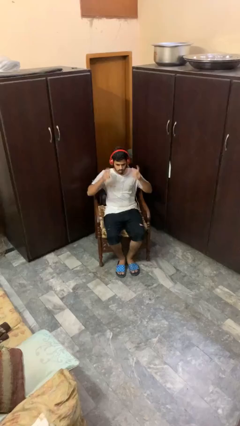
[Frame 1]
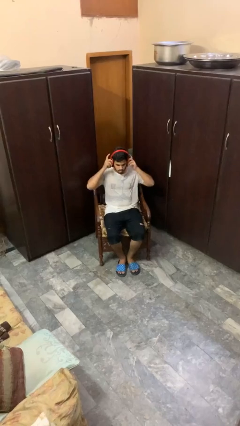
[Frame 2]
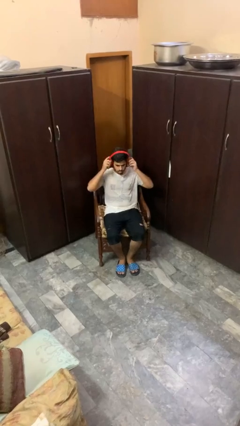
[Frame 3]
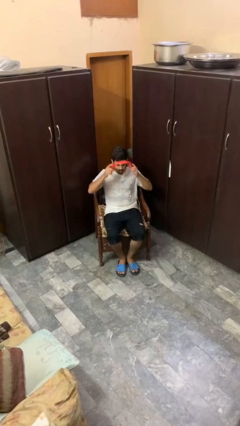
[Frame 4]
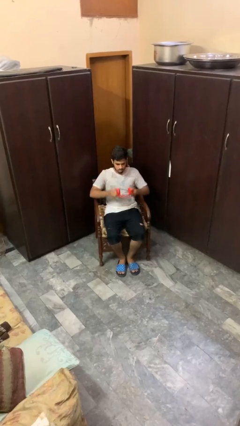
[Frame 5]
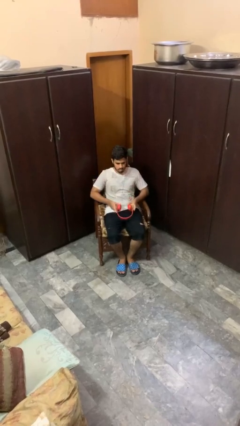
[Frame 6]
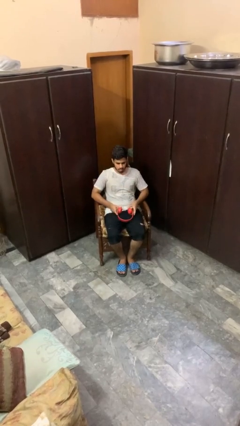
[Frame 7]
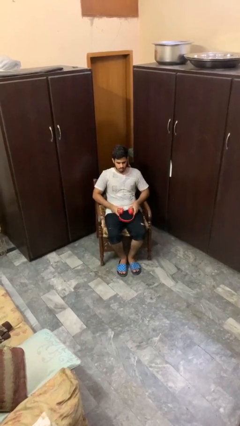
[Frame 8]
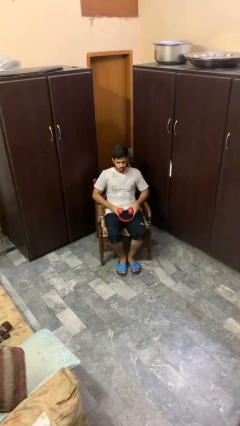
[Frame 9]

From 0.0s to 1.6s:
person takes off headphones

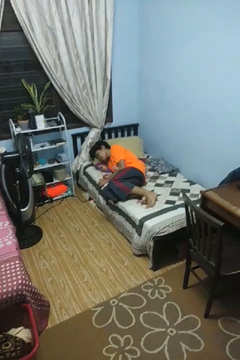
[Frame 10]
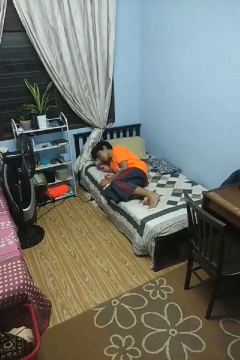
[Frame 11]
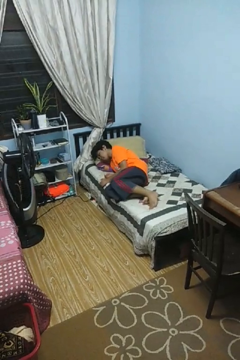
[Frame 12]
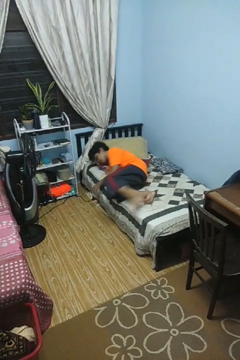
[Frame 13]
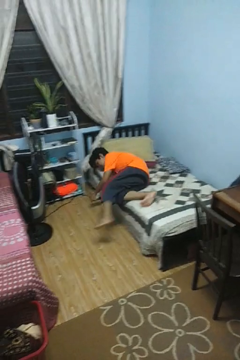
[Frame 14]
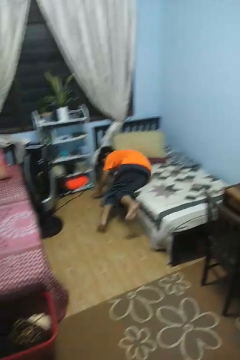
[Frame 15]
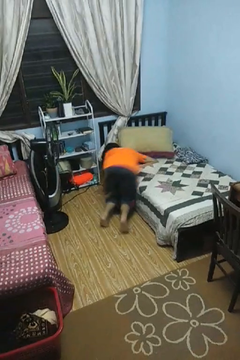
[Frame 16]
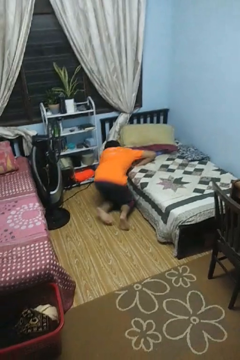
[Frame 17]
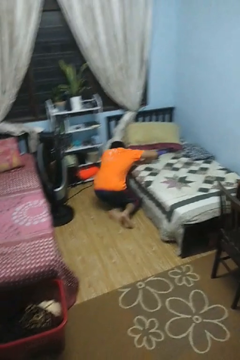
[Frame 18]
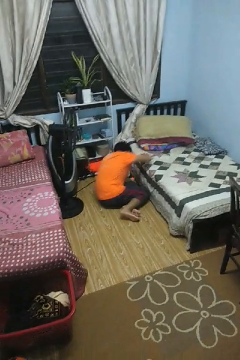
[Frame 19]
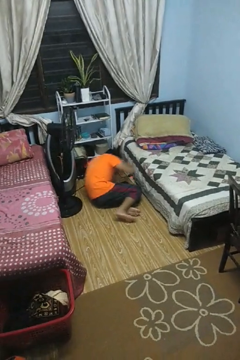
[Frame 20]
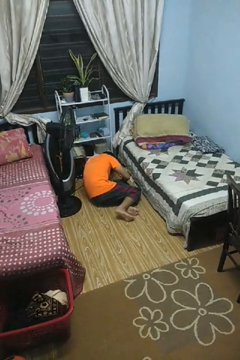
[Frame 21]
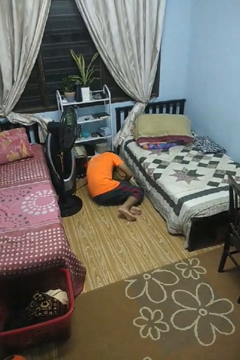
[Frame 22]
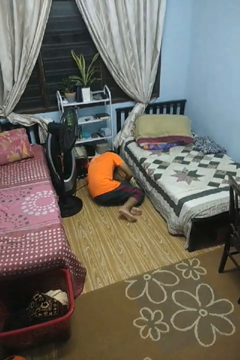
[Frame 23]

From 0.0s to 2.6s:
person falls from bed

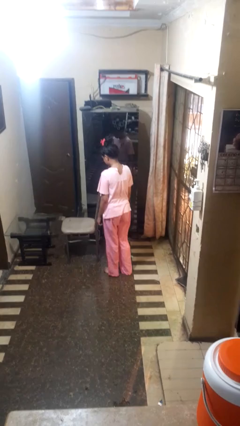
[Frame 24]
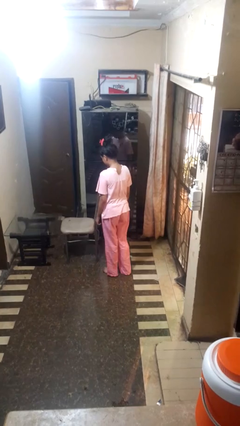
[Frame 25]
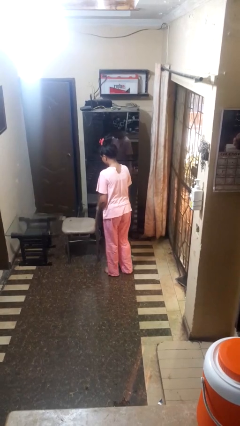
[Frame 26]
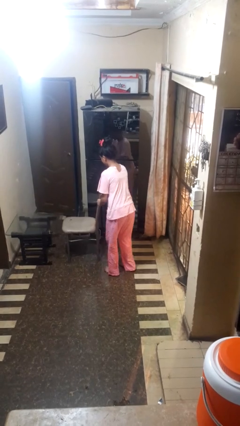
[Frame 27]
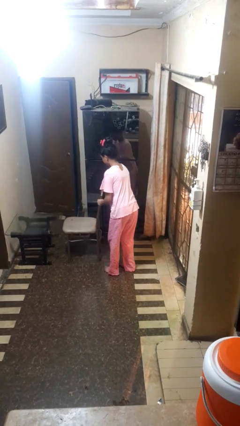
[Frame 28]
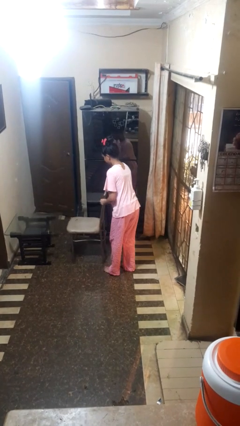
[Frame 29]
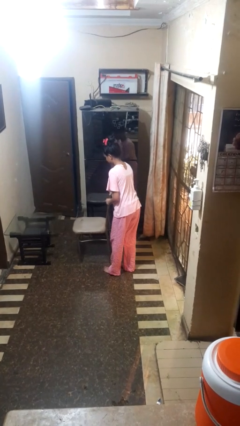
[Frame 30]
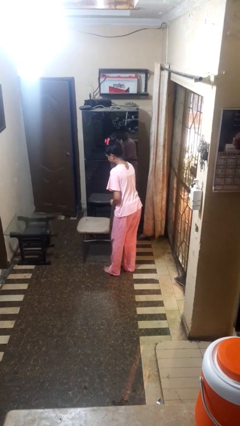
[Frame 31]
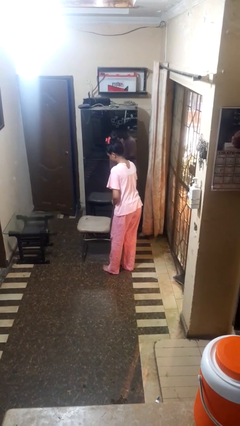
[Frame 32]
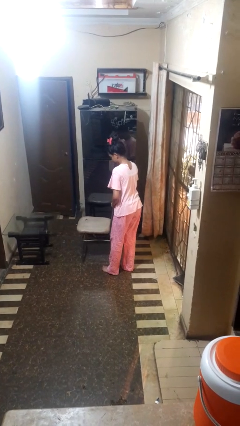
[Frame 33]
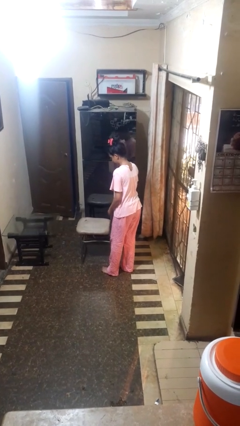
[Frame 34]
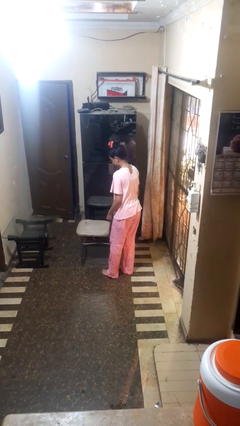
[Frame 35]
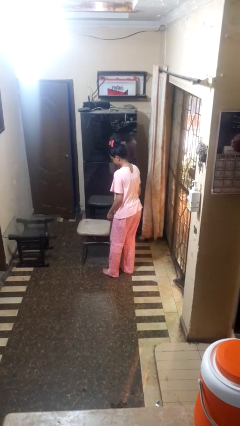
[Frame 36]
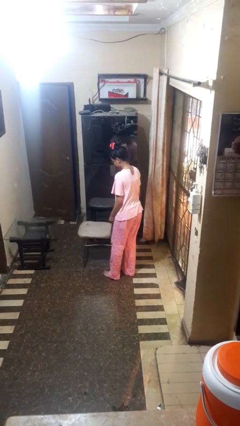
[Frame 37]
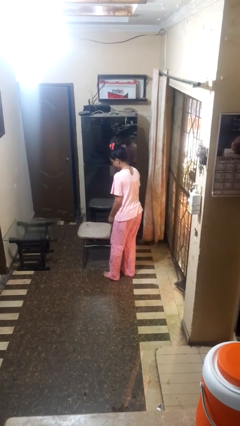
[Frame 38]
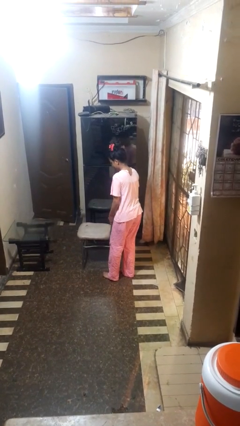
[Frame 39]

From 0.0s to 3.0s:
person pulls out chair

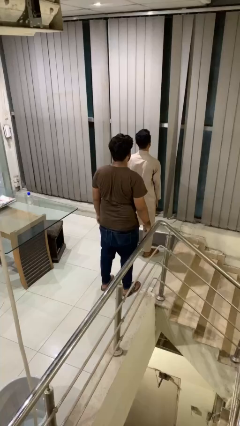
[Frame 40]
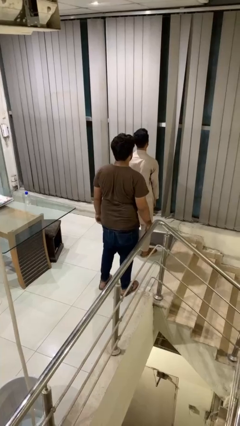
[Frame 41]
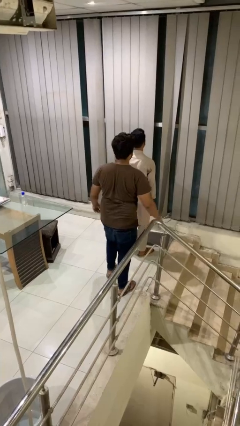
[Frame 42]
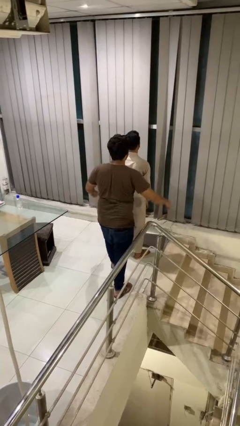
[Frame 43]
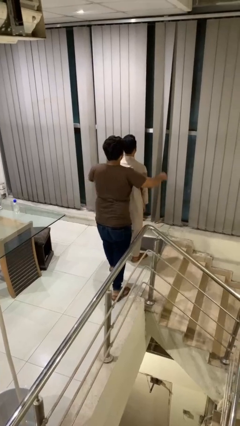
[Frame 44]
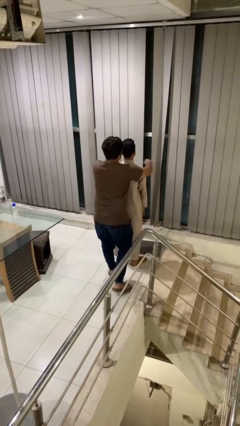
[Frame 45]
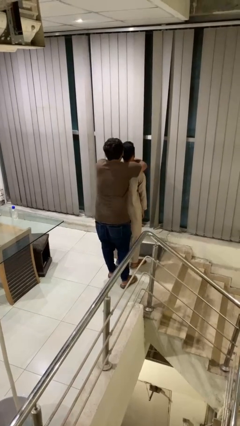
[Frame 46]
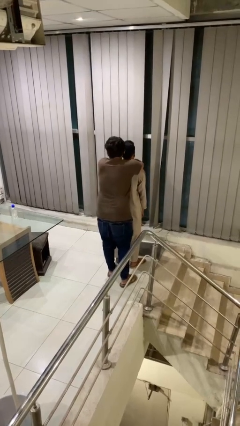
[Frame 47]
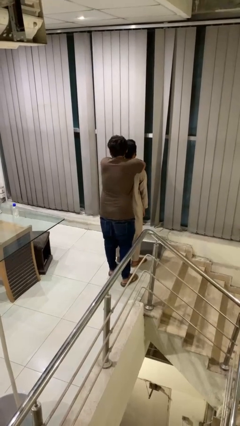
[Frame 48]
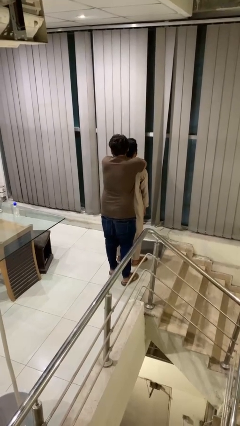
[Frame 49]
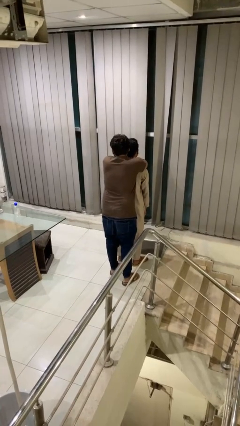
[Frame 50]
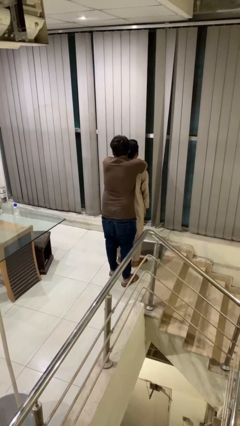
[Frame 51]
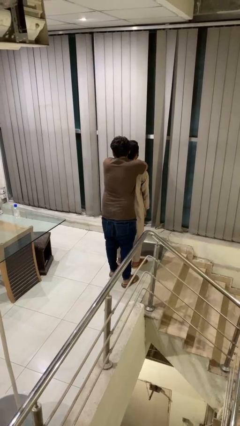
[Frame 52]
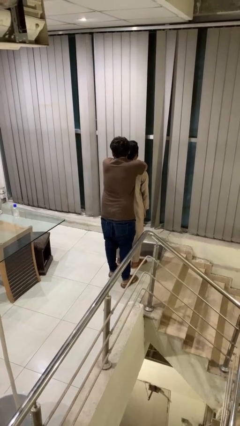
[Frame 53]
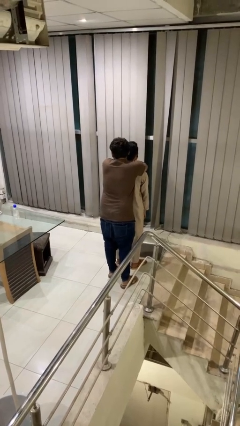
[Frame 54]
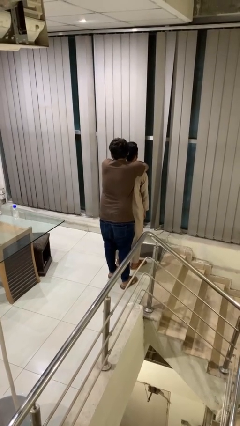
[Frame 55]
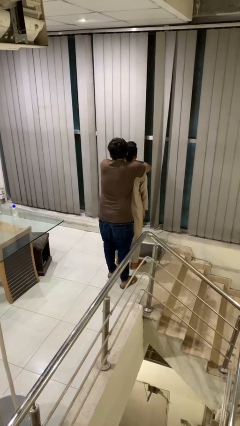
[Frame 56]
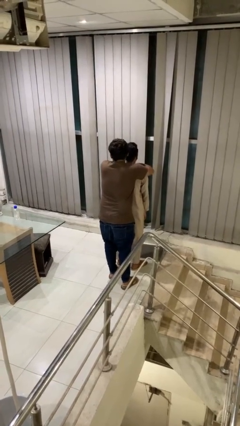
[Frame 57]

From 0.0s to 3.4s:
person hugs person from behind

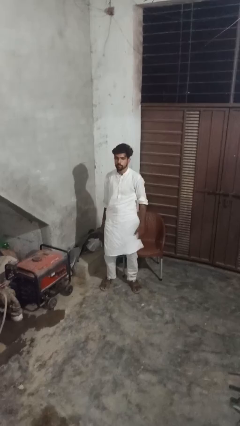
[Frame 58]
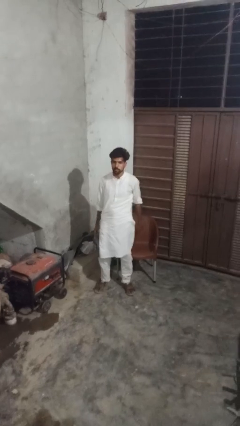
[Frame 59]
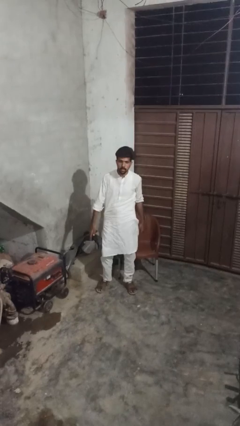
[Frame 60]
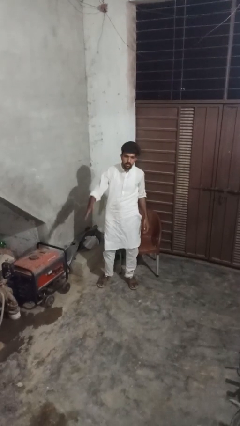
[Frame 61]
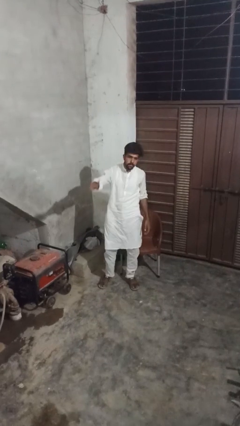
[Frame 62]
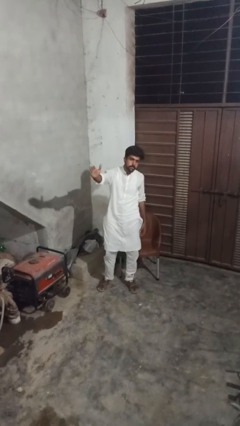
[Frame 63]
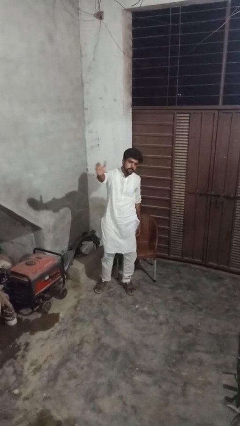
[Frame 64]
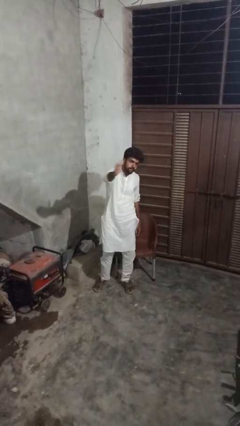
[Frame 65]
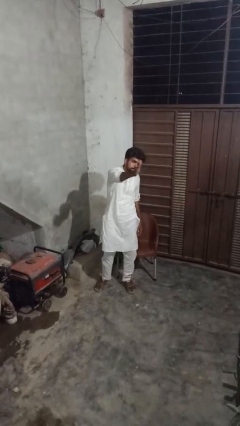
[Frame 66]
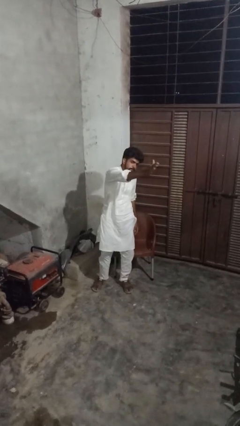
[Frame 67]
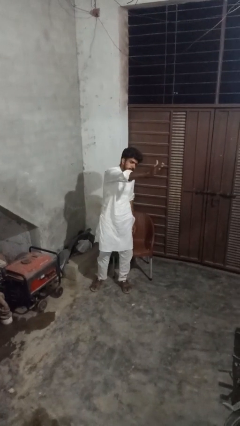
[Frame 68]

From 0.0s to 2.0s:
person gestures swipe left

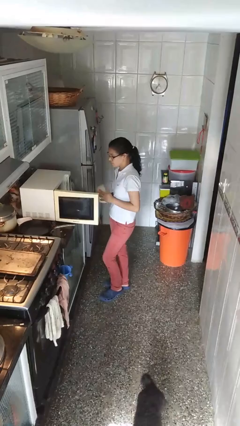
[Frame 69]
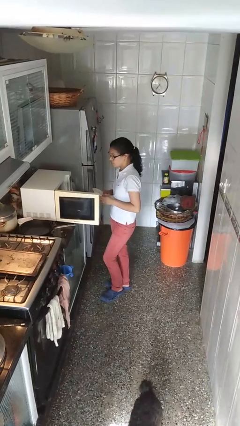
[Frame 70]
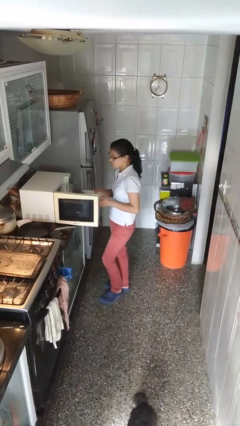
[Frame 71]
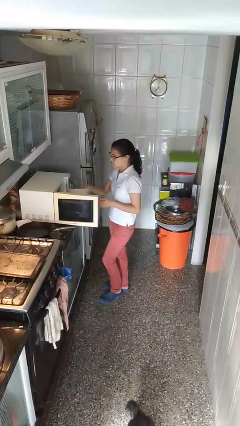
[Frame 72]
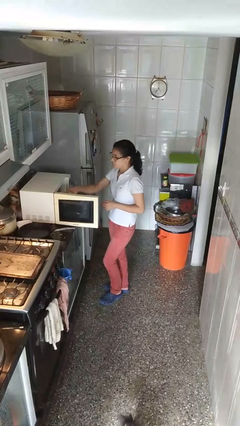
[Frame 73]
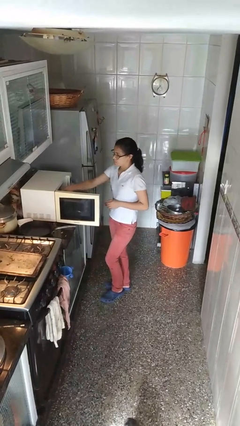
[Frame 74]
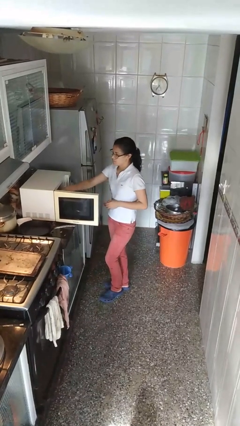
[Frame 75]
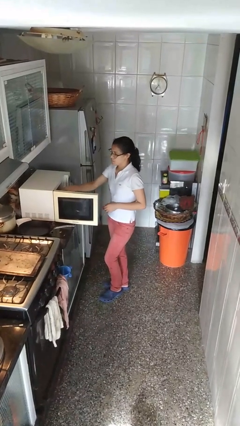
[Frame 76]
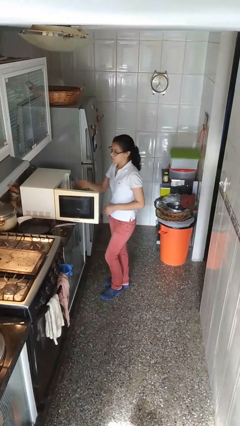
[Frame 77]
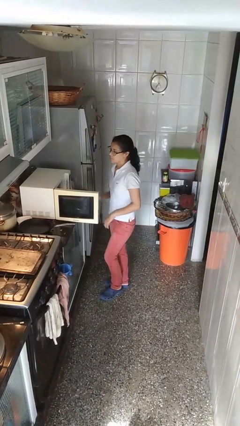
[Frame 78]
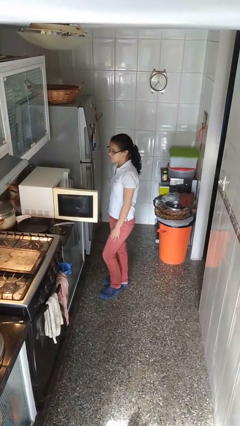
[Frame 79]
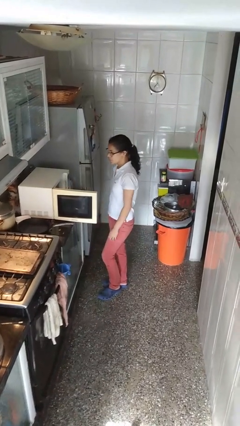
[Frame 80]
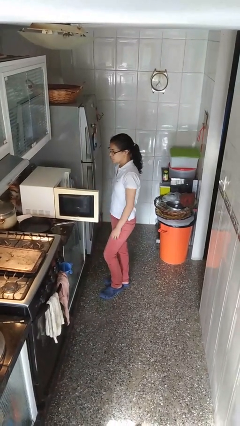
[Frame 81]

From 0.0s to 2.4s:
person puts object into microwave

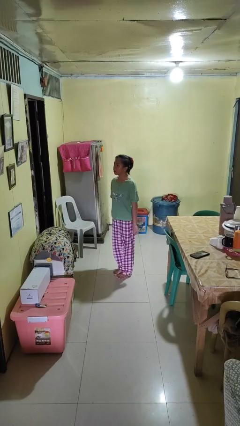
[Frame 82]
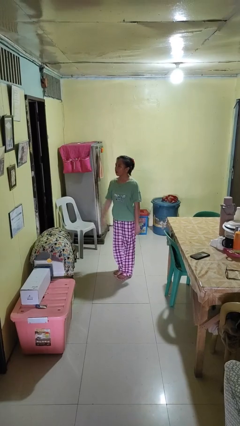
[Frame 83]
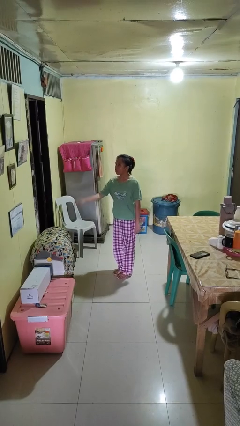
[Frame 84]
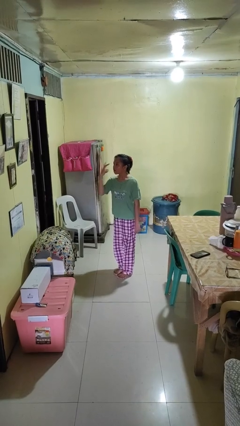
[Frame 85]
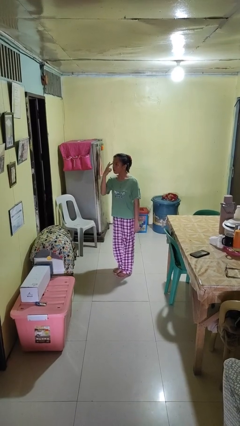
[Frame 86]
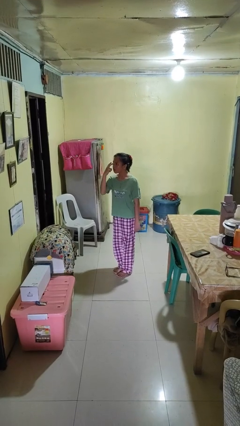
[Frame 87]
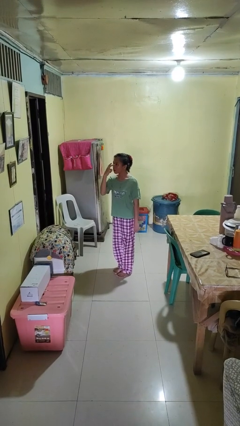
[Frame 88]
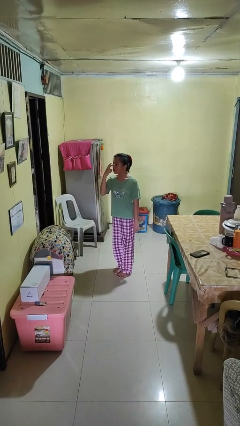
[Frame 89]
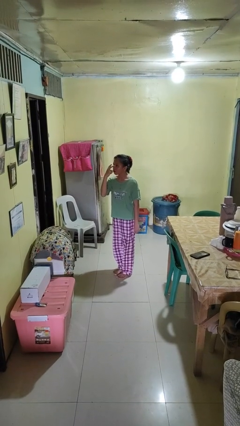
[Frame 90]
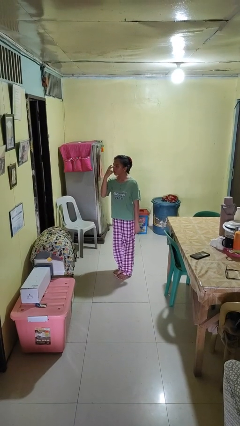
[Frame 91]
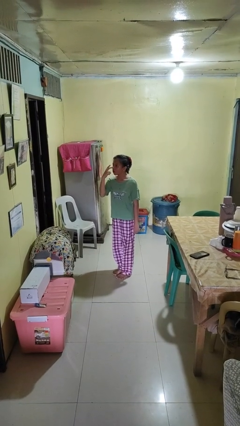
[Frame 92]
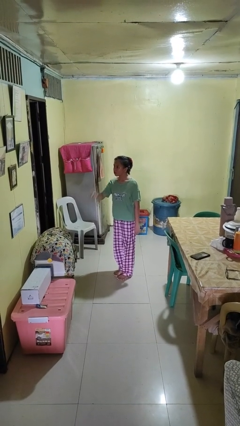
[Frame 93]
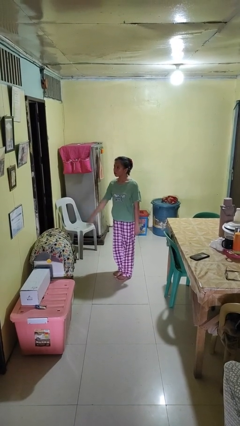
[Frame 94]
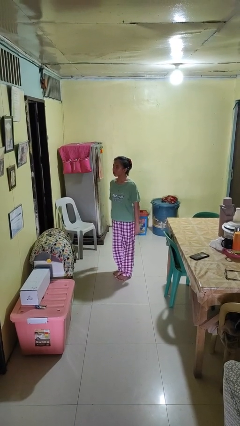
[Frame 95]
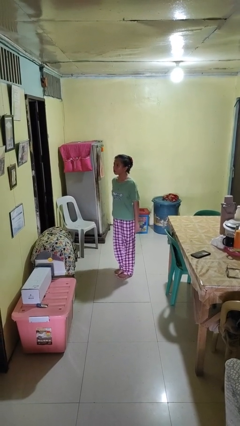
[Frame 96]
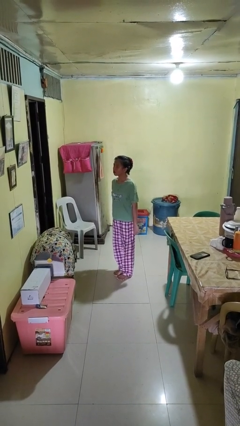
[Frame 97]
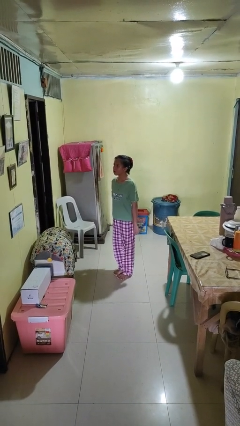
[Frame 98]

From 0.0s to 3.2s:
person gestures watch closely
